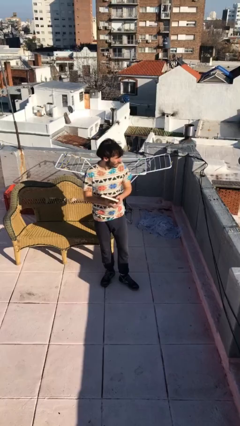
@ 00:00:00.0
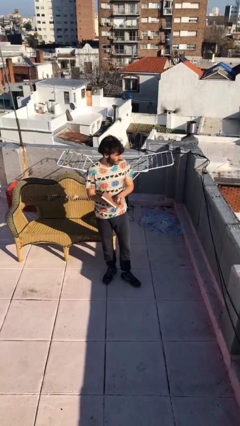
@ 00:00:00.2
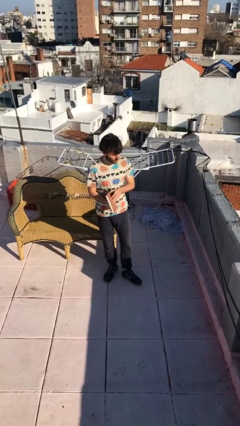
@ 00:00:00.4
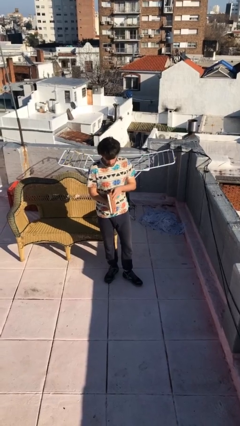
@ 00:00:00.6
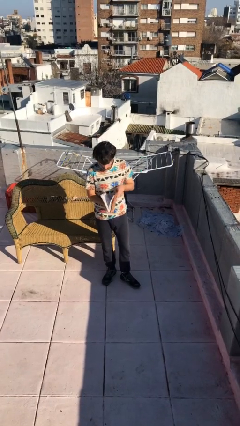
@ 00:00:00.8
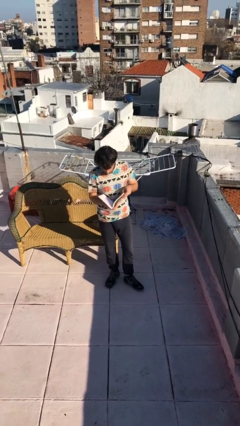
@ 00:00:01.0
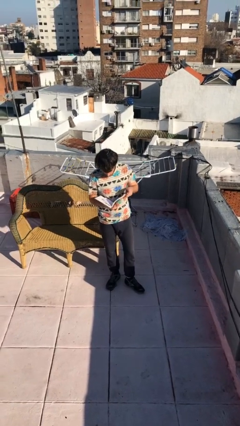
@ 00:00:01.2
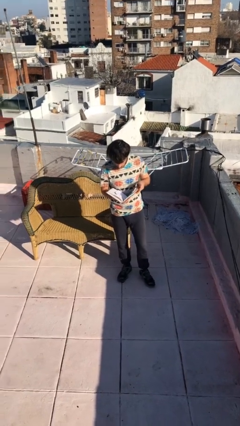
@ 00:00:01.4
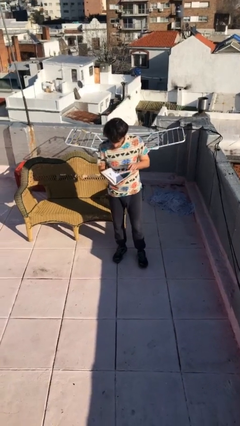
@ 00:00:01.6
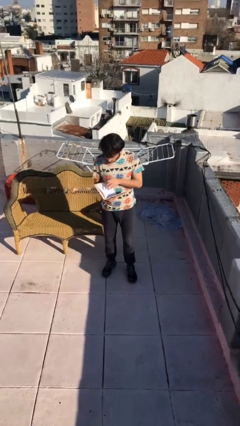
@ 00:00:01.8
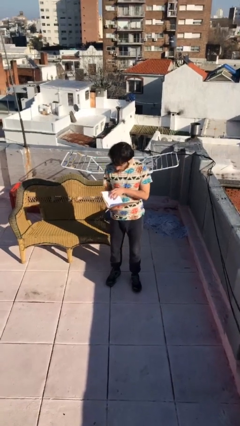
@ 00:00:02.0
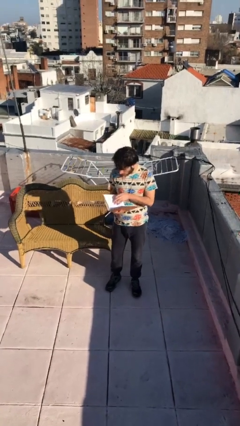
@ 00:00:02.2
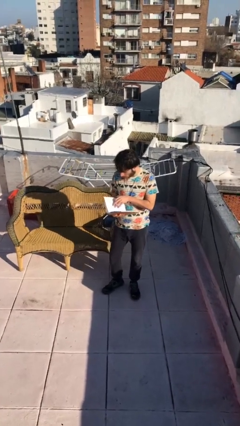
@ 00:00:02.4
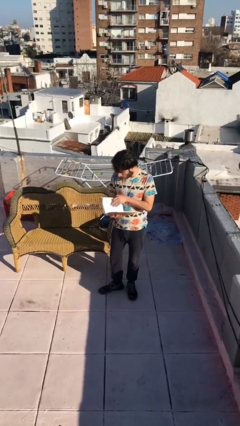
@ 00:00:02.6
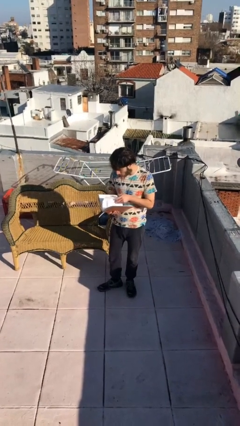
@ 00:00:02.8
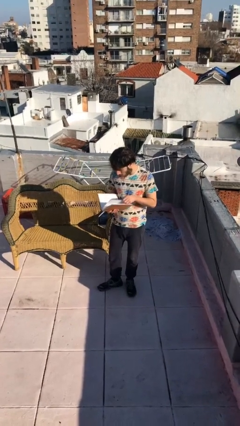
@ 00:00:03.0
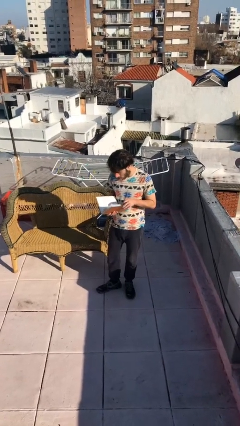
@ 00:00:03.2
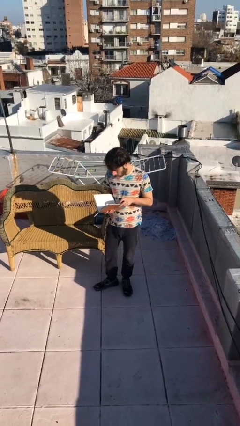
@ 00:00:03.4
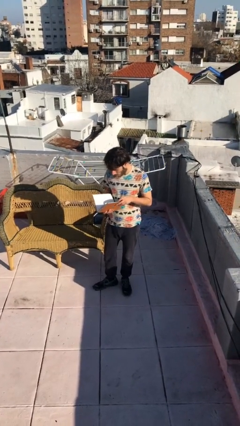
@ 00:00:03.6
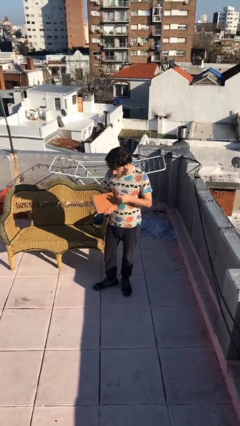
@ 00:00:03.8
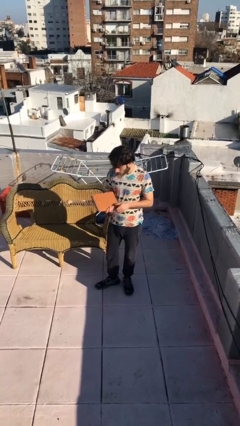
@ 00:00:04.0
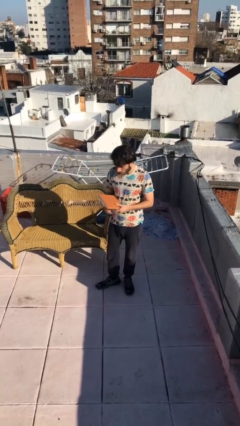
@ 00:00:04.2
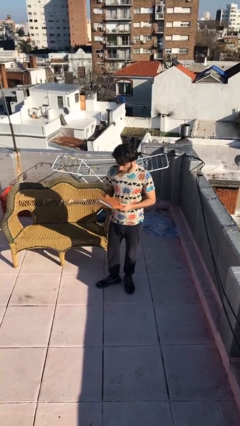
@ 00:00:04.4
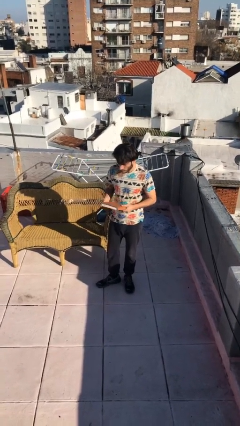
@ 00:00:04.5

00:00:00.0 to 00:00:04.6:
person reads book

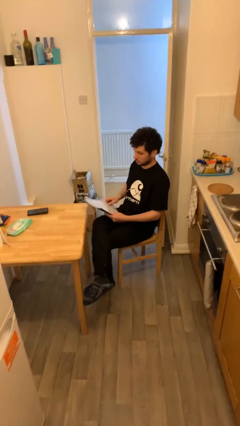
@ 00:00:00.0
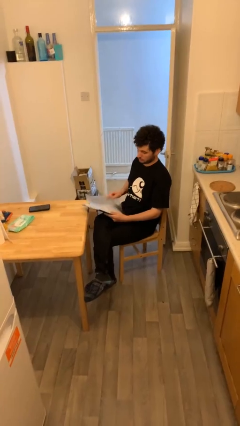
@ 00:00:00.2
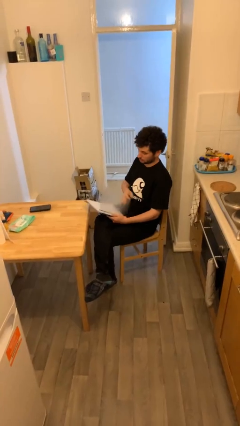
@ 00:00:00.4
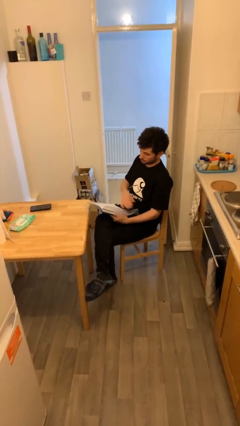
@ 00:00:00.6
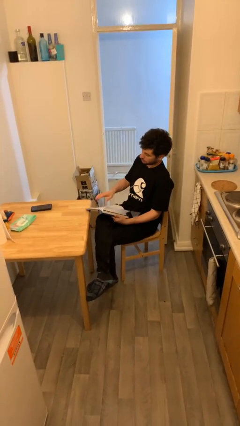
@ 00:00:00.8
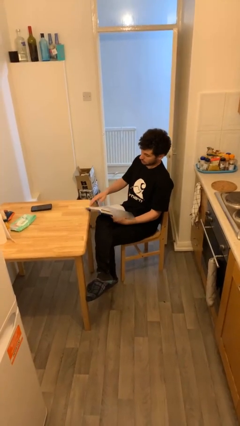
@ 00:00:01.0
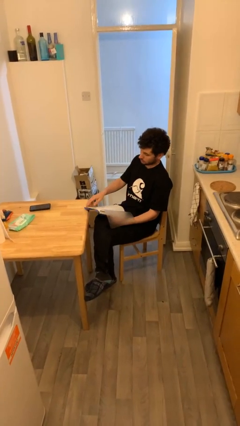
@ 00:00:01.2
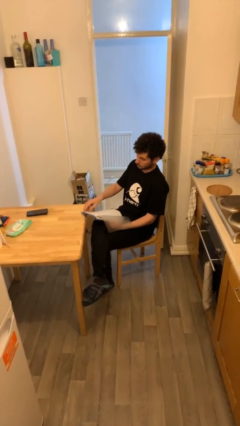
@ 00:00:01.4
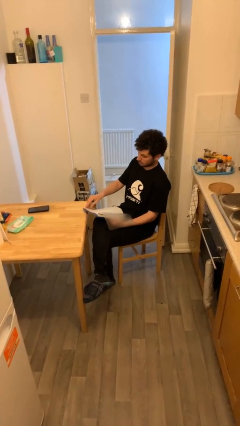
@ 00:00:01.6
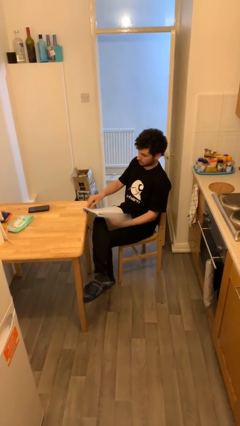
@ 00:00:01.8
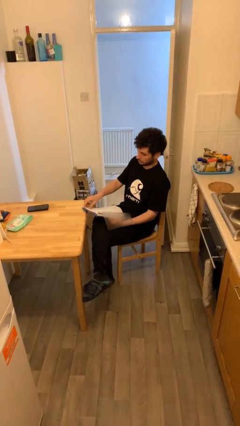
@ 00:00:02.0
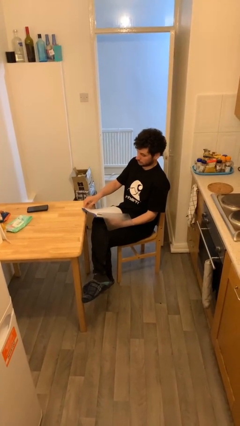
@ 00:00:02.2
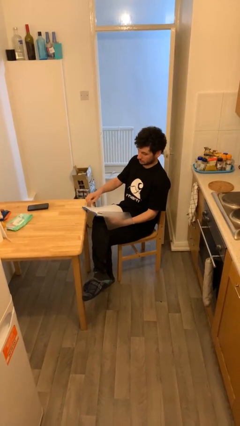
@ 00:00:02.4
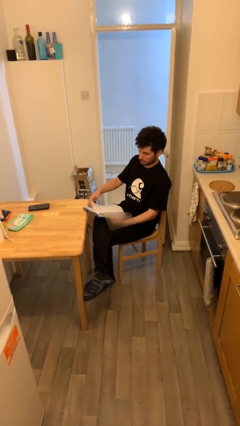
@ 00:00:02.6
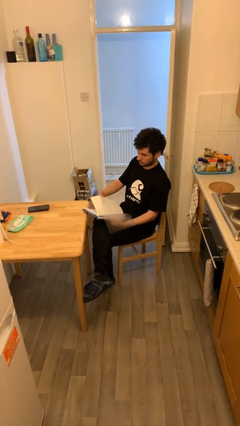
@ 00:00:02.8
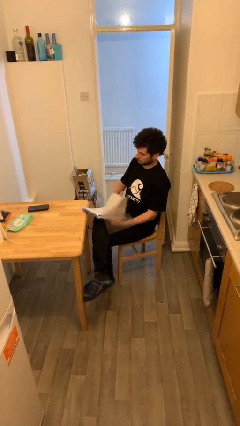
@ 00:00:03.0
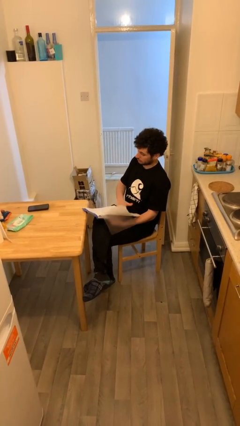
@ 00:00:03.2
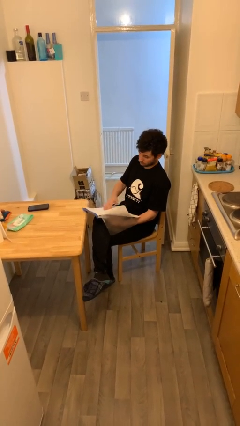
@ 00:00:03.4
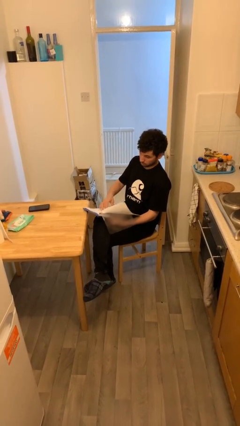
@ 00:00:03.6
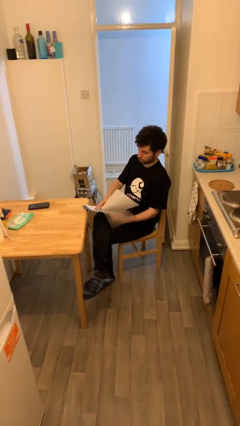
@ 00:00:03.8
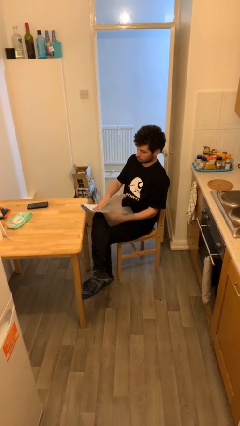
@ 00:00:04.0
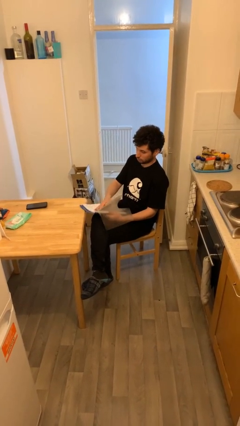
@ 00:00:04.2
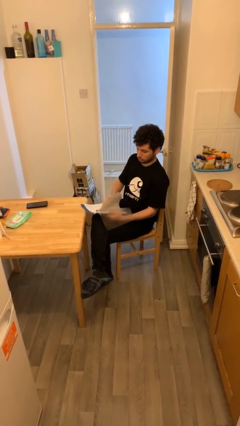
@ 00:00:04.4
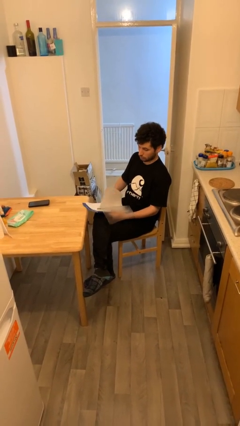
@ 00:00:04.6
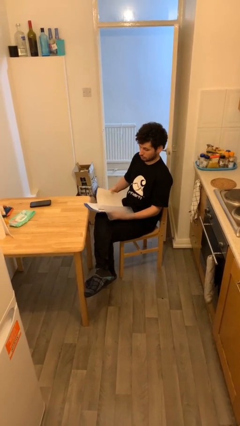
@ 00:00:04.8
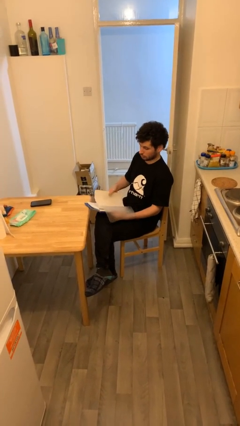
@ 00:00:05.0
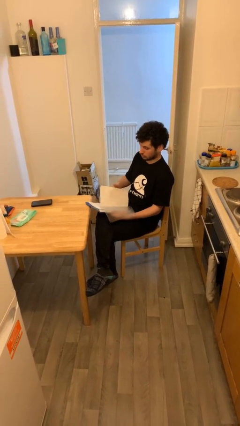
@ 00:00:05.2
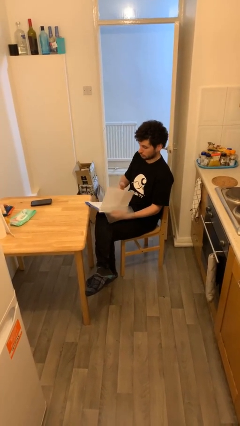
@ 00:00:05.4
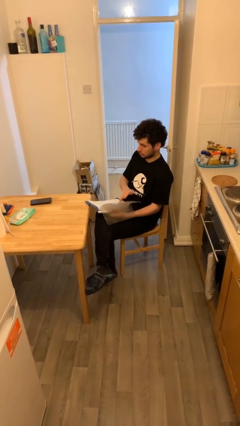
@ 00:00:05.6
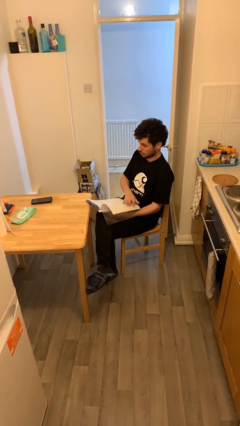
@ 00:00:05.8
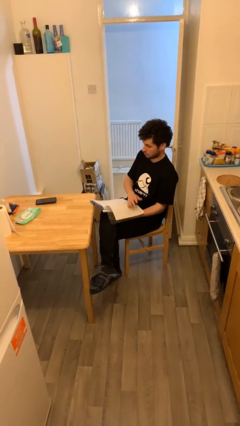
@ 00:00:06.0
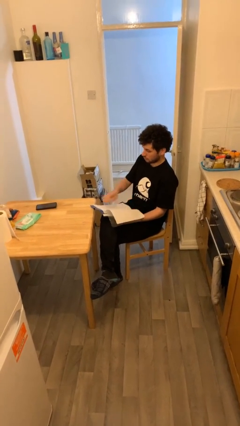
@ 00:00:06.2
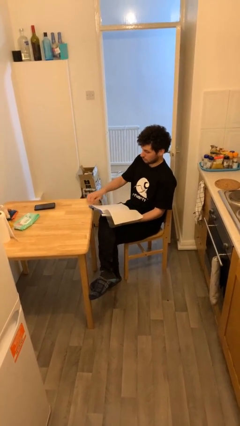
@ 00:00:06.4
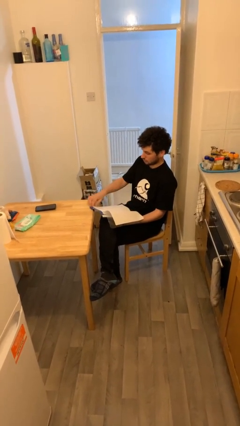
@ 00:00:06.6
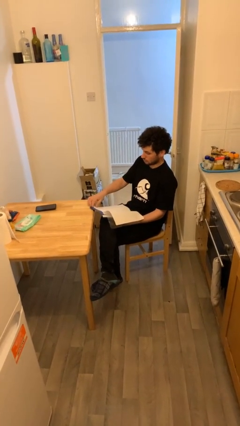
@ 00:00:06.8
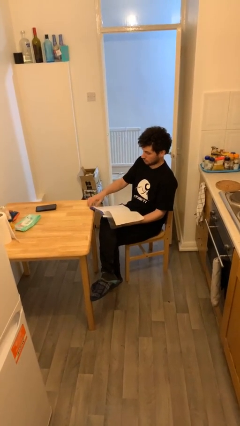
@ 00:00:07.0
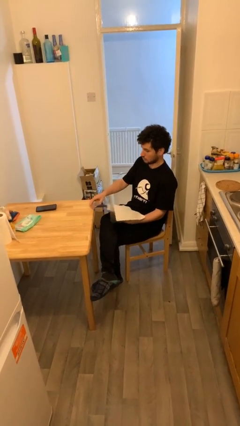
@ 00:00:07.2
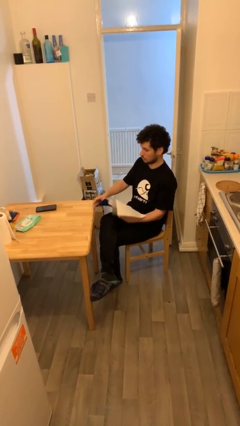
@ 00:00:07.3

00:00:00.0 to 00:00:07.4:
person reads document

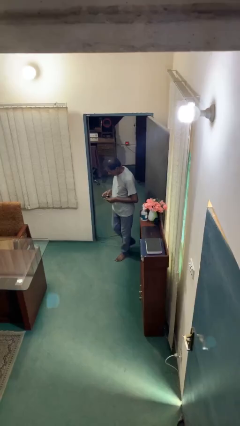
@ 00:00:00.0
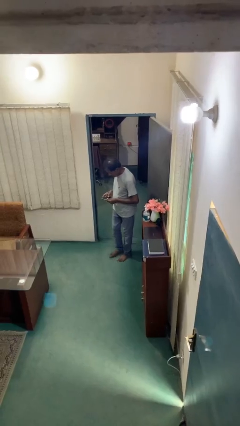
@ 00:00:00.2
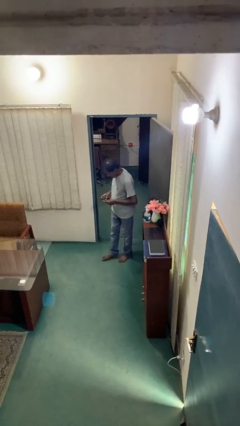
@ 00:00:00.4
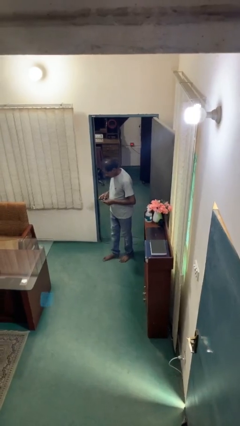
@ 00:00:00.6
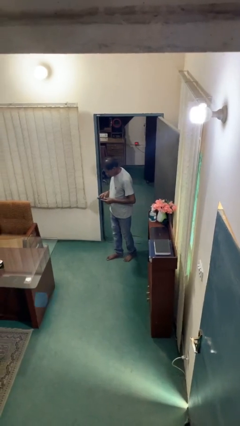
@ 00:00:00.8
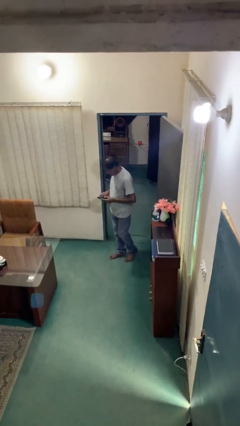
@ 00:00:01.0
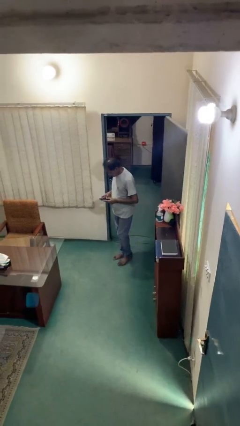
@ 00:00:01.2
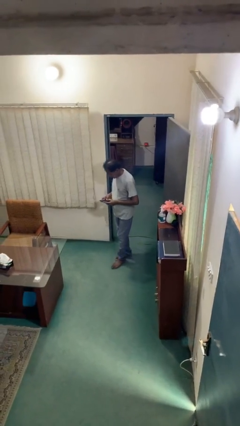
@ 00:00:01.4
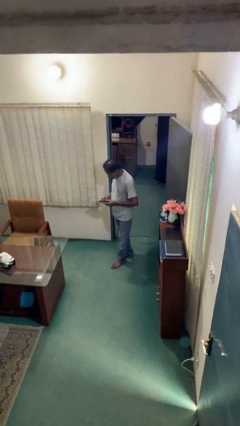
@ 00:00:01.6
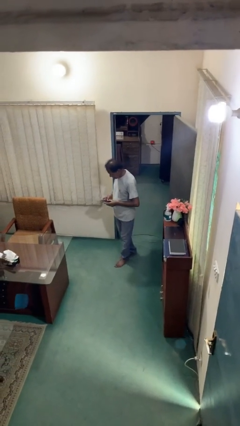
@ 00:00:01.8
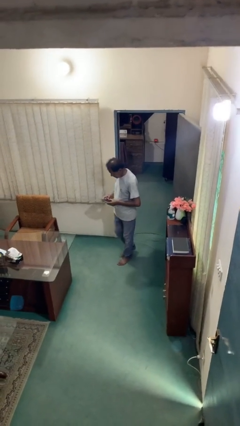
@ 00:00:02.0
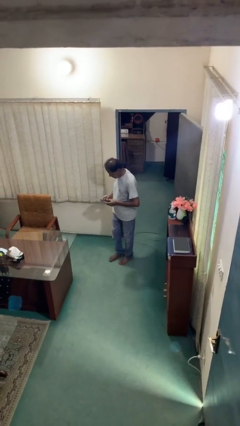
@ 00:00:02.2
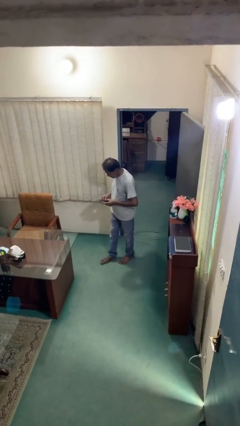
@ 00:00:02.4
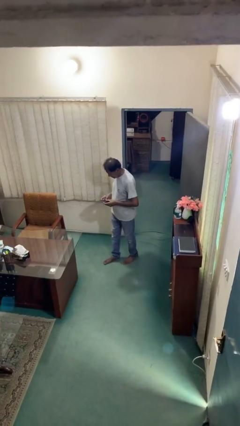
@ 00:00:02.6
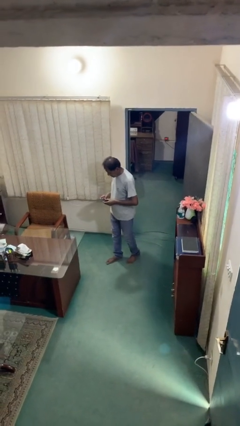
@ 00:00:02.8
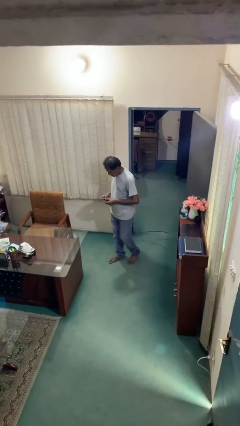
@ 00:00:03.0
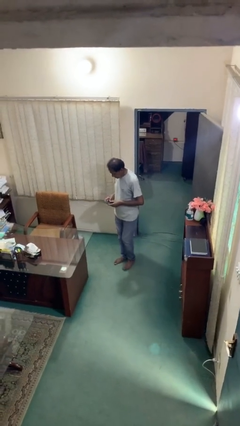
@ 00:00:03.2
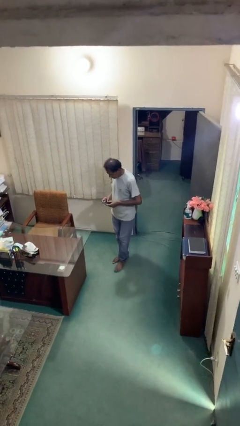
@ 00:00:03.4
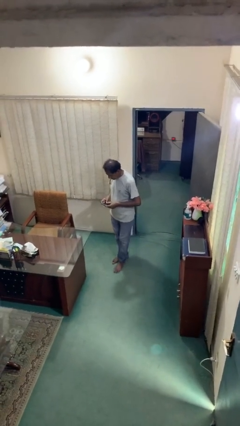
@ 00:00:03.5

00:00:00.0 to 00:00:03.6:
person texts on phone

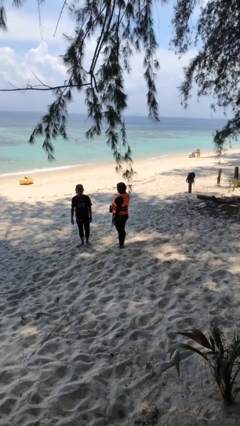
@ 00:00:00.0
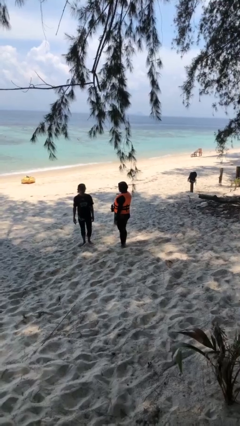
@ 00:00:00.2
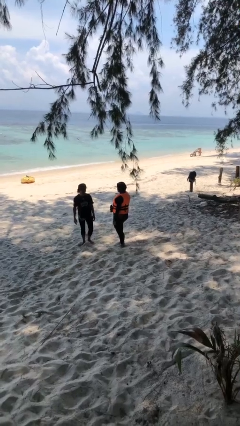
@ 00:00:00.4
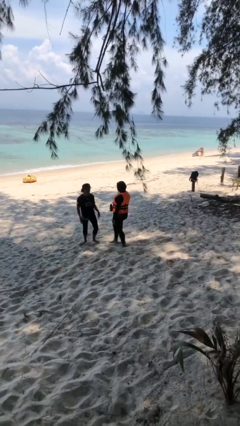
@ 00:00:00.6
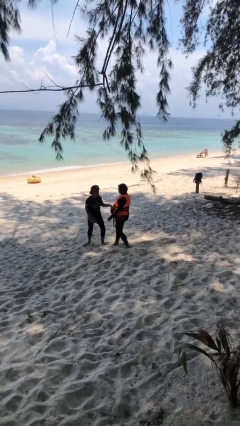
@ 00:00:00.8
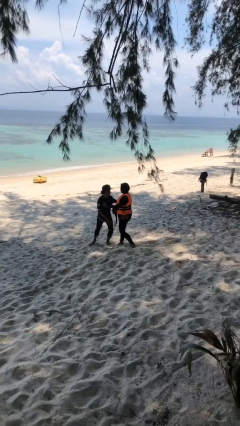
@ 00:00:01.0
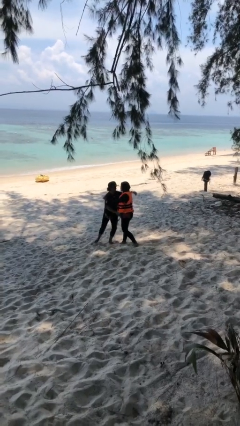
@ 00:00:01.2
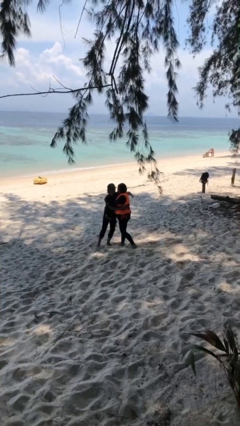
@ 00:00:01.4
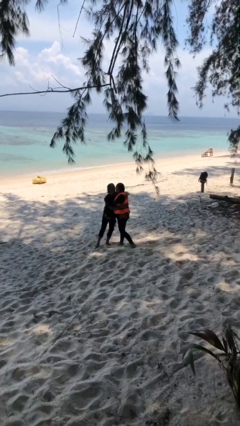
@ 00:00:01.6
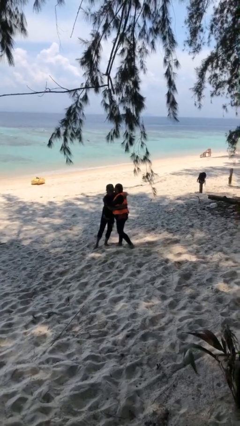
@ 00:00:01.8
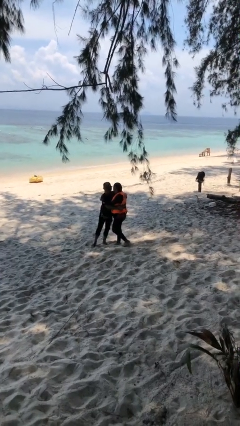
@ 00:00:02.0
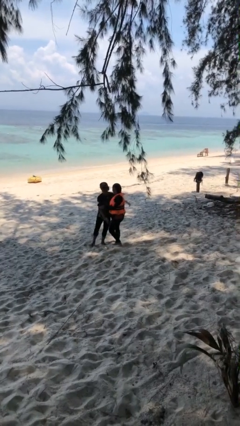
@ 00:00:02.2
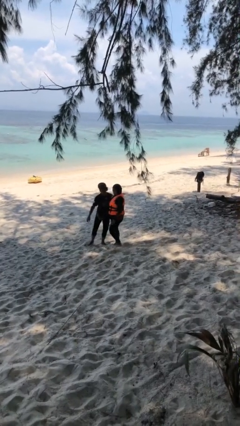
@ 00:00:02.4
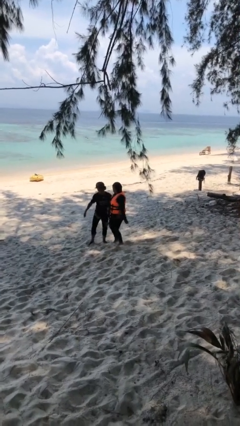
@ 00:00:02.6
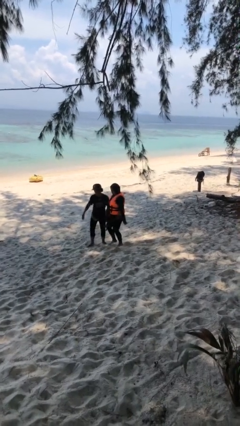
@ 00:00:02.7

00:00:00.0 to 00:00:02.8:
person embraces person
